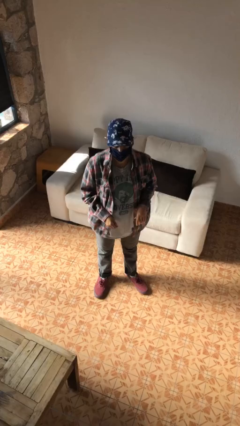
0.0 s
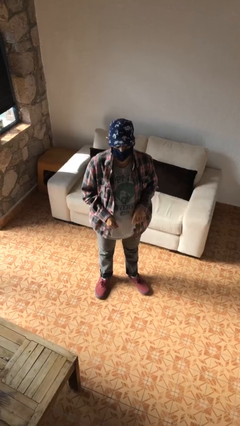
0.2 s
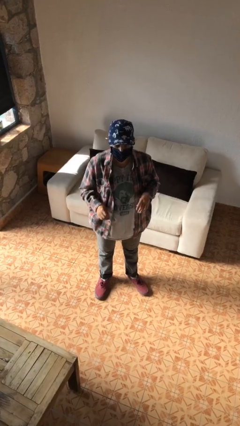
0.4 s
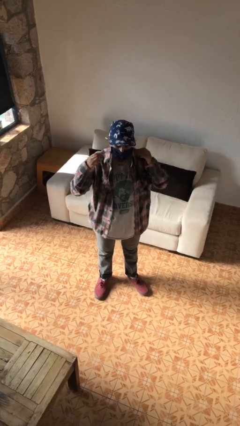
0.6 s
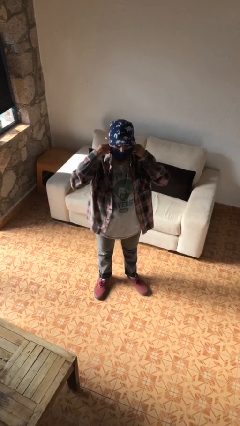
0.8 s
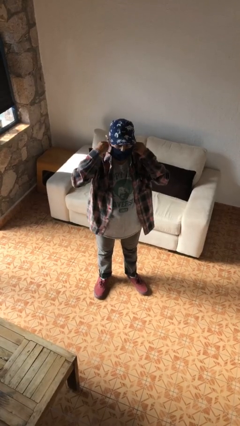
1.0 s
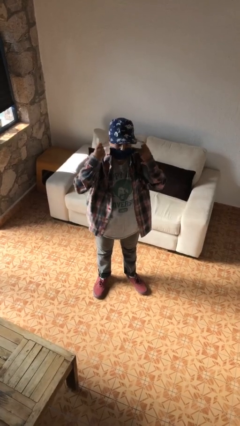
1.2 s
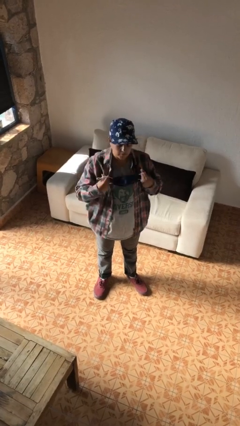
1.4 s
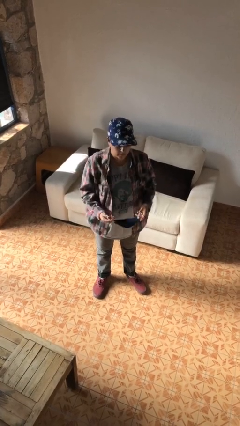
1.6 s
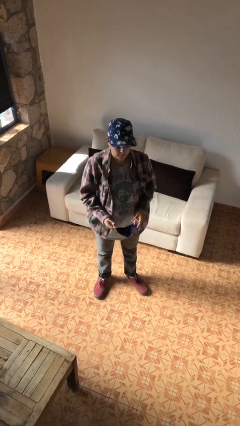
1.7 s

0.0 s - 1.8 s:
person takes off facemask

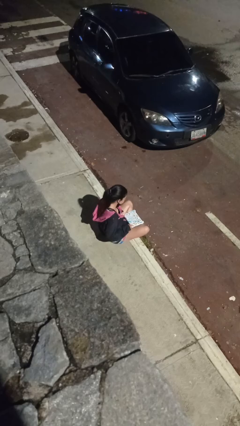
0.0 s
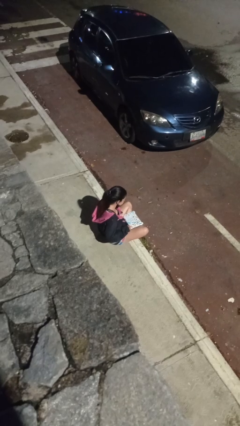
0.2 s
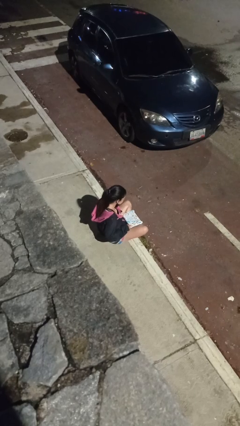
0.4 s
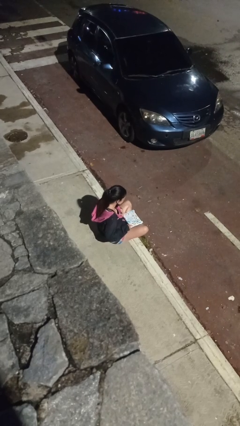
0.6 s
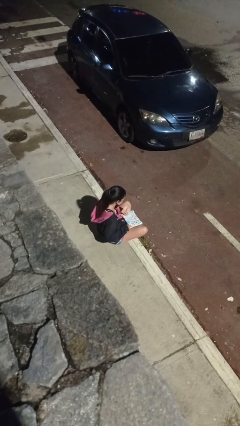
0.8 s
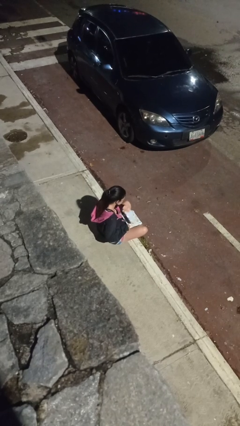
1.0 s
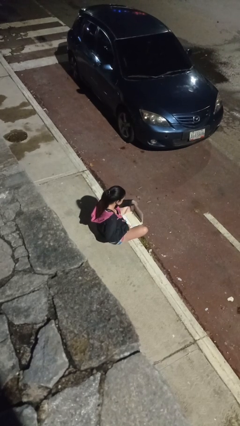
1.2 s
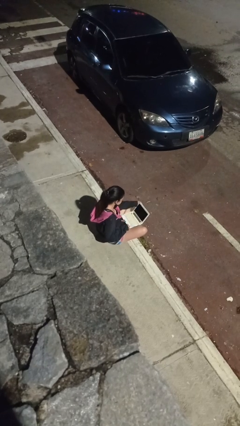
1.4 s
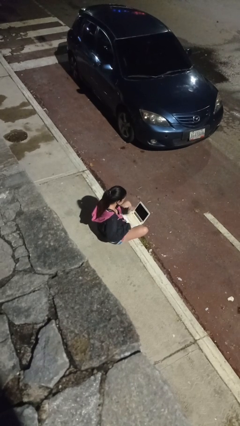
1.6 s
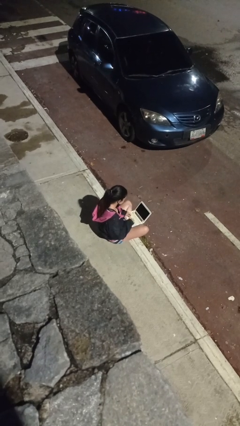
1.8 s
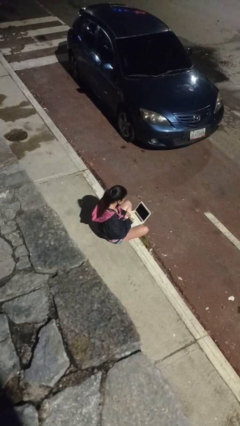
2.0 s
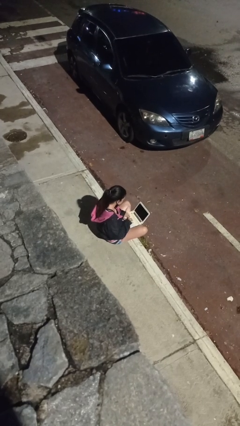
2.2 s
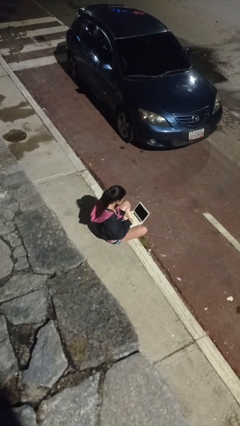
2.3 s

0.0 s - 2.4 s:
person opens laptop

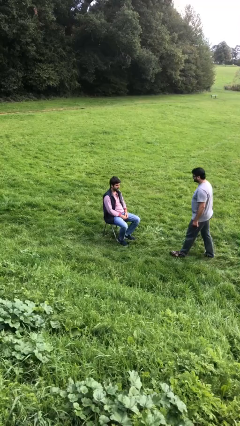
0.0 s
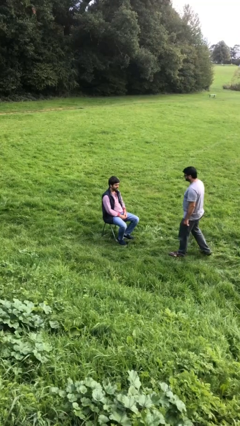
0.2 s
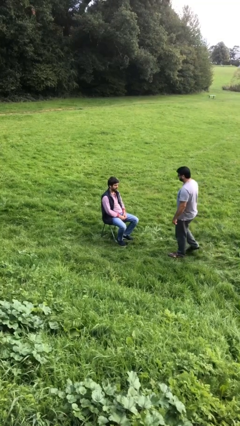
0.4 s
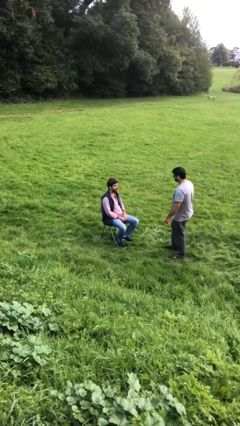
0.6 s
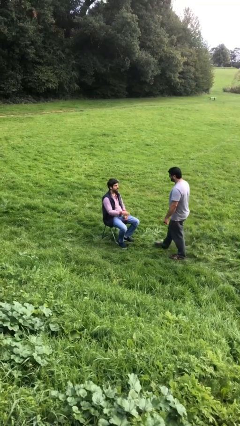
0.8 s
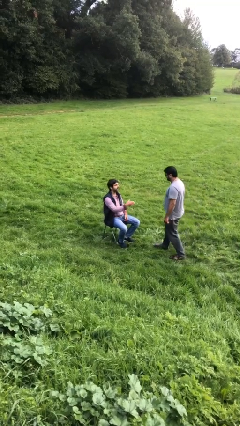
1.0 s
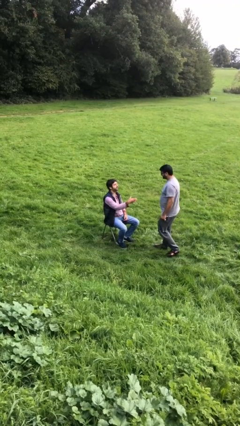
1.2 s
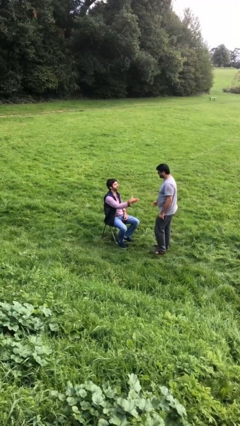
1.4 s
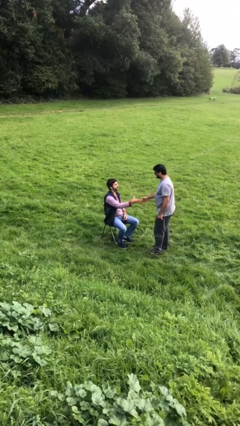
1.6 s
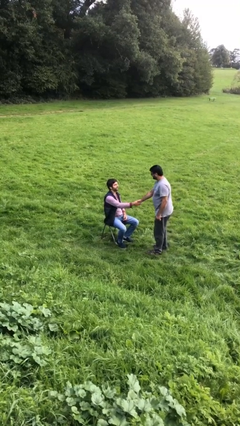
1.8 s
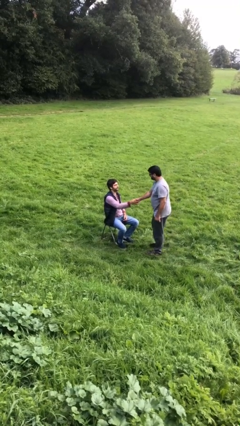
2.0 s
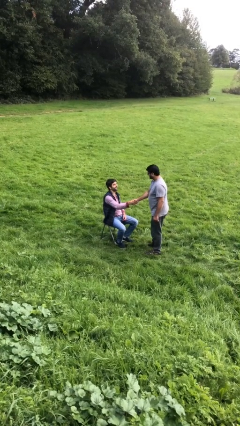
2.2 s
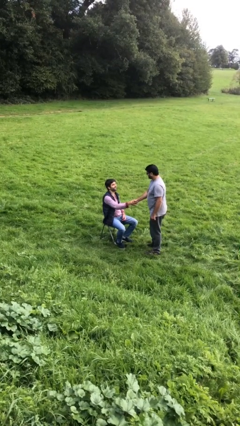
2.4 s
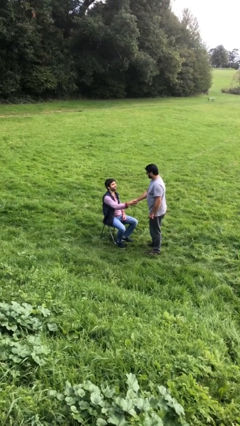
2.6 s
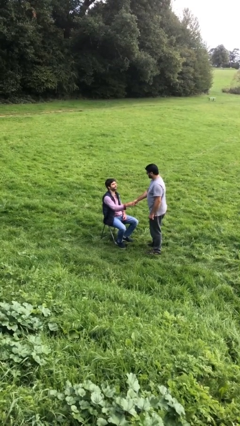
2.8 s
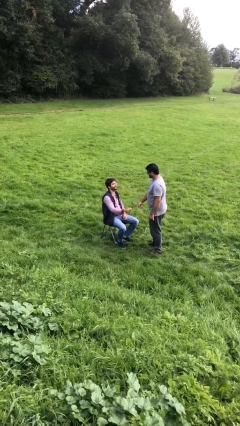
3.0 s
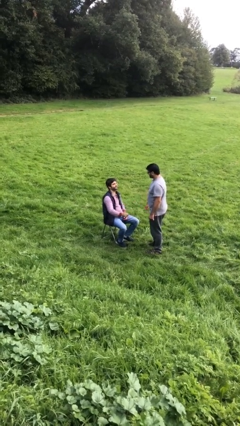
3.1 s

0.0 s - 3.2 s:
person shakes hand

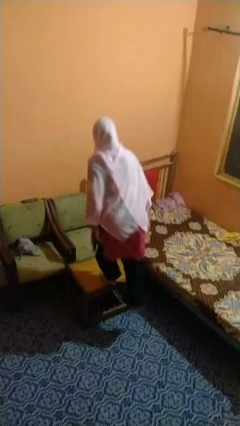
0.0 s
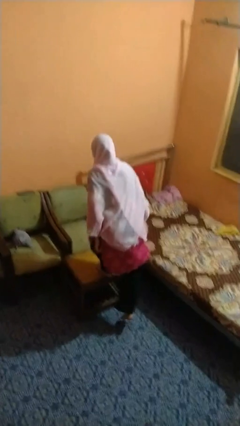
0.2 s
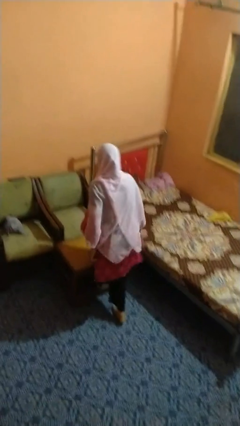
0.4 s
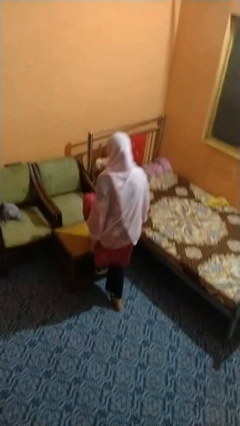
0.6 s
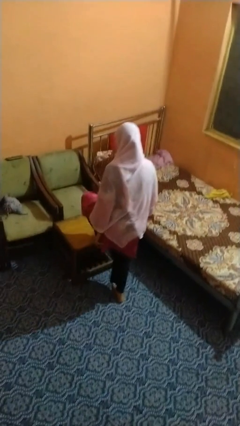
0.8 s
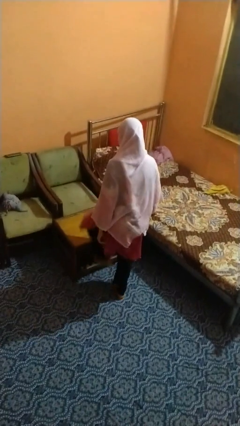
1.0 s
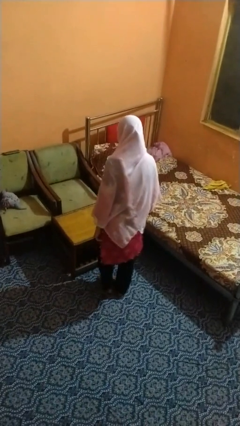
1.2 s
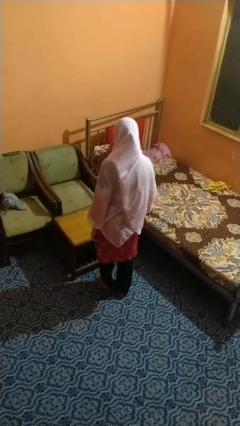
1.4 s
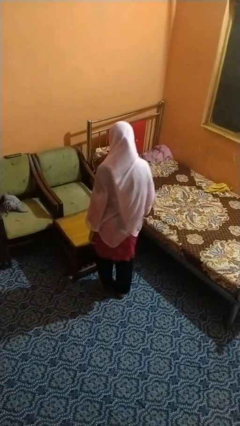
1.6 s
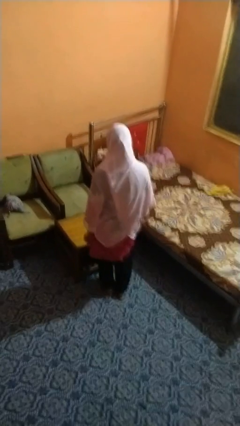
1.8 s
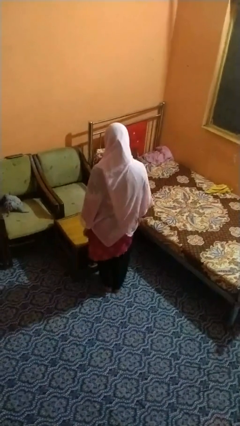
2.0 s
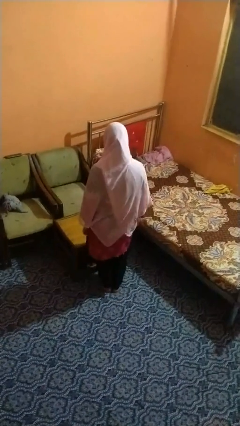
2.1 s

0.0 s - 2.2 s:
person climbs off table

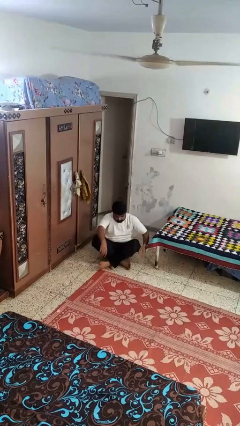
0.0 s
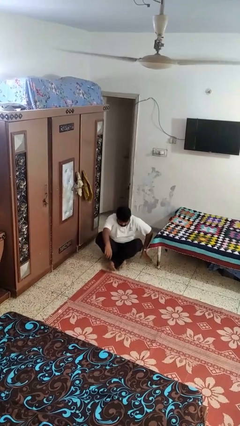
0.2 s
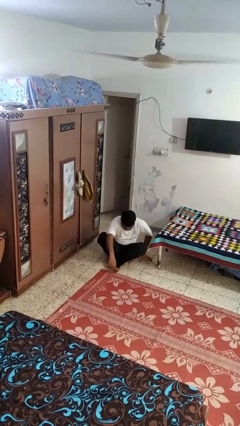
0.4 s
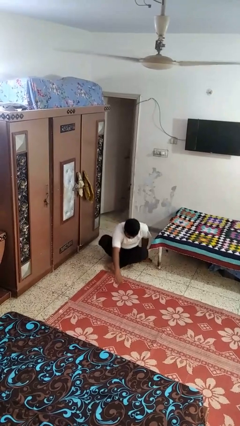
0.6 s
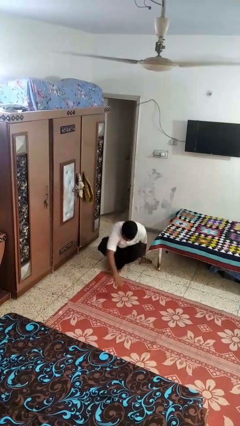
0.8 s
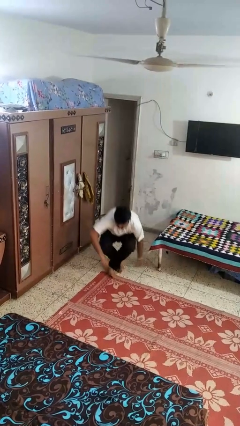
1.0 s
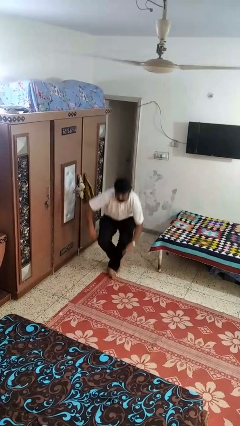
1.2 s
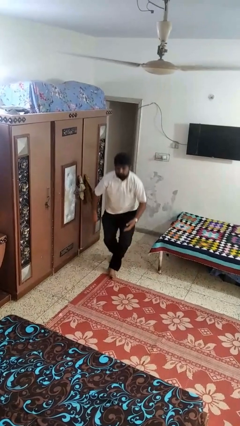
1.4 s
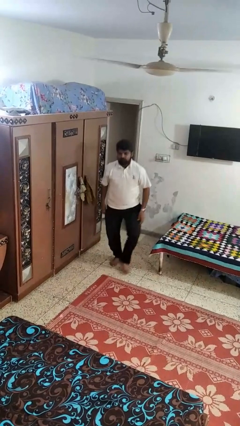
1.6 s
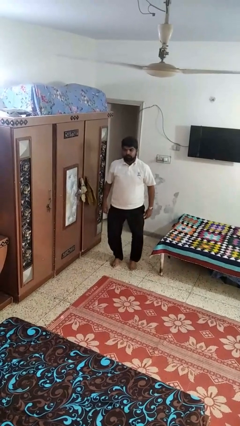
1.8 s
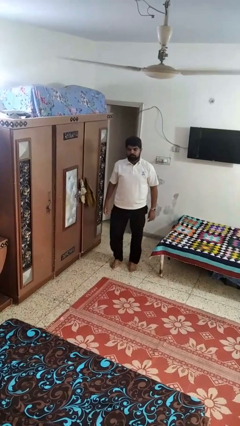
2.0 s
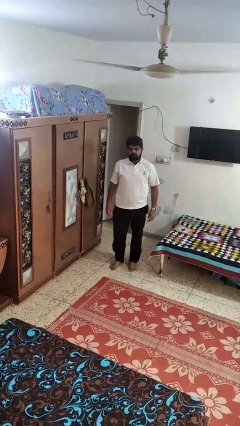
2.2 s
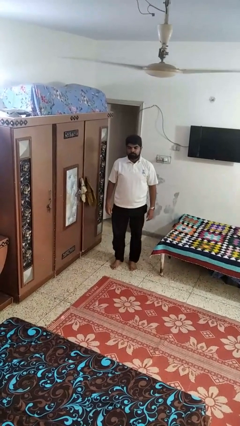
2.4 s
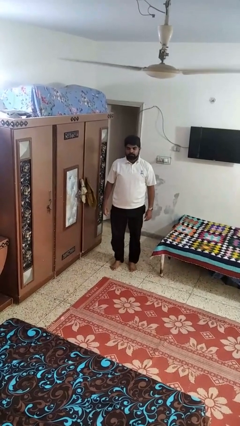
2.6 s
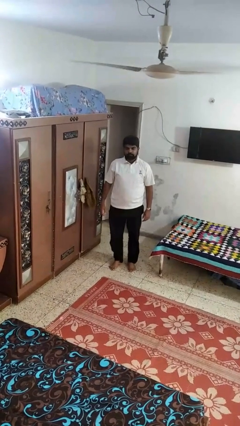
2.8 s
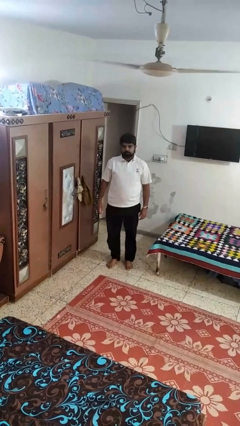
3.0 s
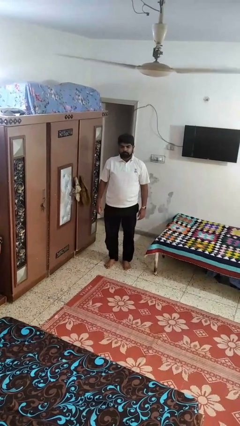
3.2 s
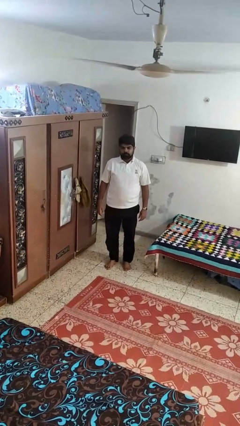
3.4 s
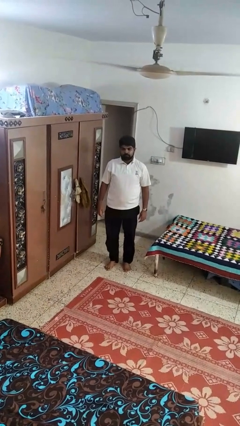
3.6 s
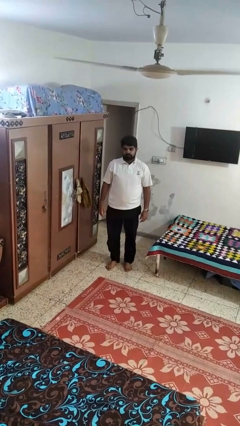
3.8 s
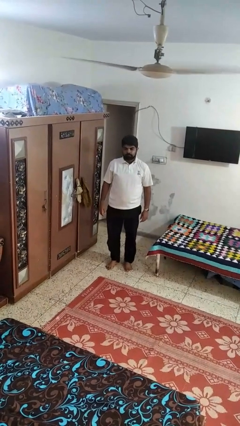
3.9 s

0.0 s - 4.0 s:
person stands up from floor

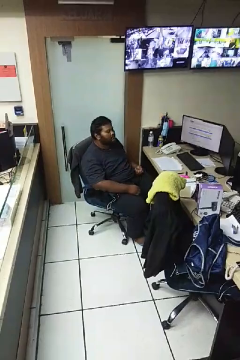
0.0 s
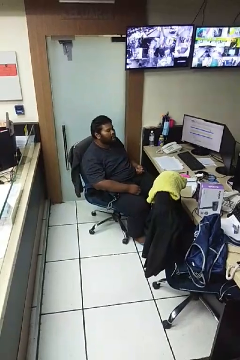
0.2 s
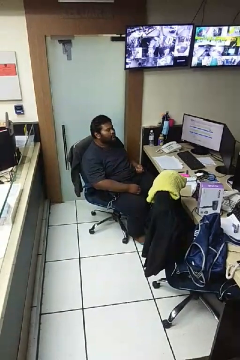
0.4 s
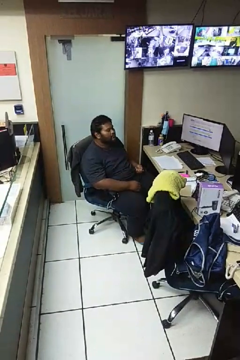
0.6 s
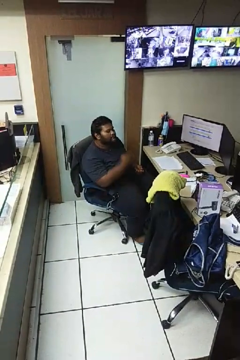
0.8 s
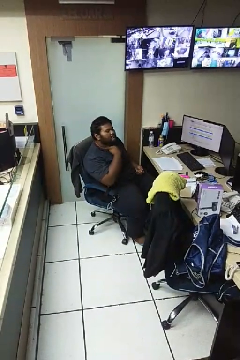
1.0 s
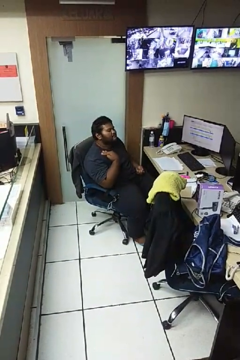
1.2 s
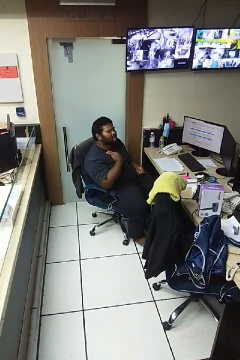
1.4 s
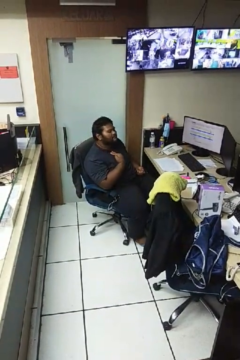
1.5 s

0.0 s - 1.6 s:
person gestures cut

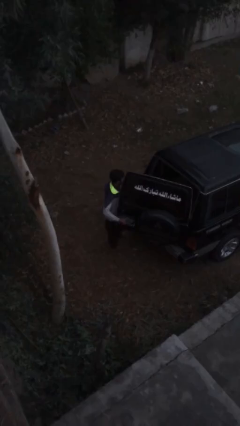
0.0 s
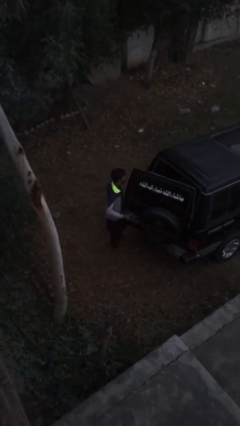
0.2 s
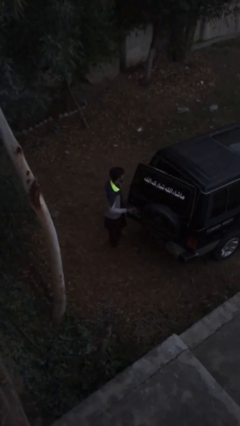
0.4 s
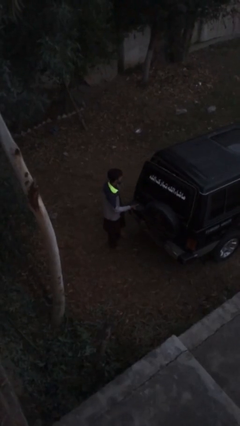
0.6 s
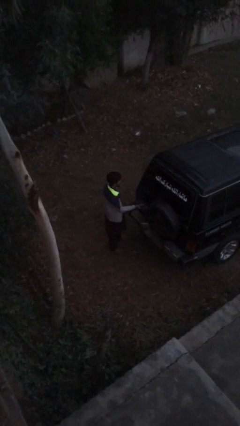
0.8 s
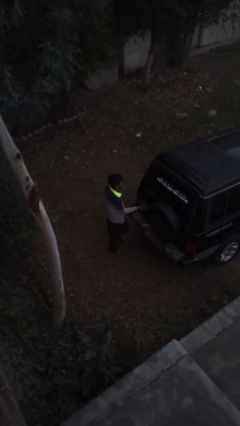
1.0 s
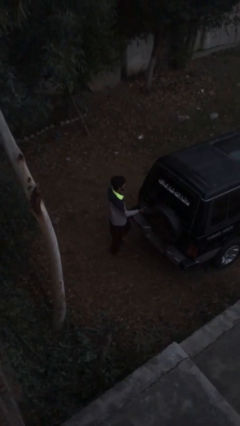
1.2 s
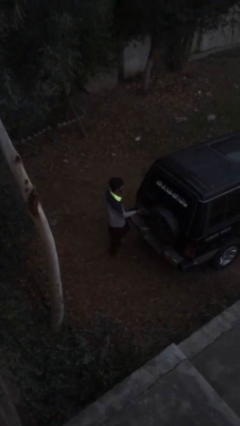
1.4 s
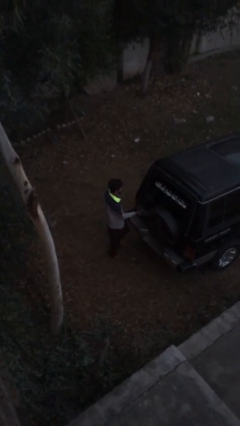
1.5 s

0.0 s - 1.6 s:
person closes car trunk

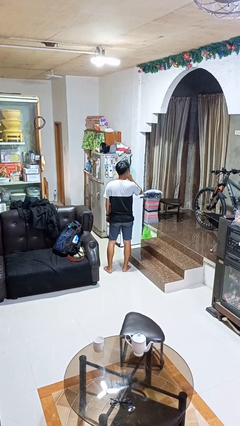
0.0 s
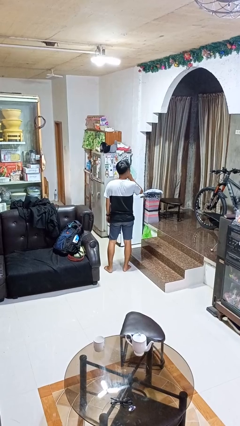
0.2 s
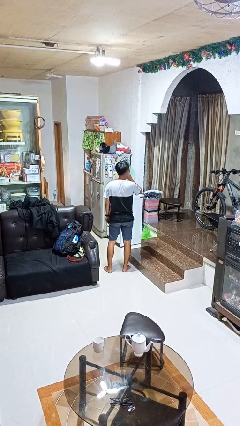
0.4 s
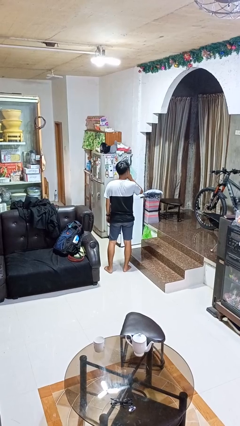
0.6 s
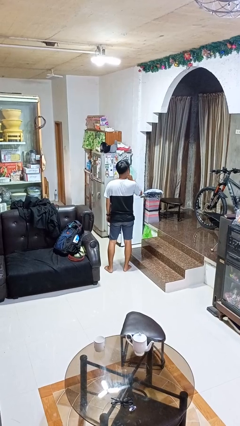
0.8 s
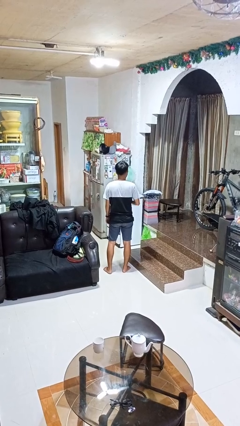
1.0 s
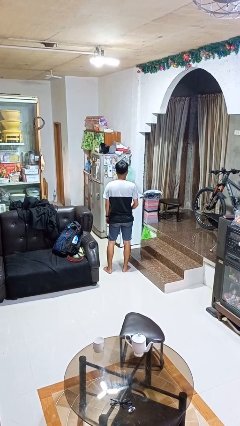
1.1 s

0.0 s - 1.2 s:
person gestures be quiet
